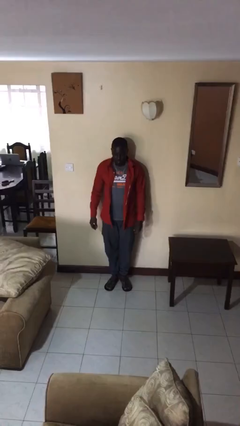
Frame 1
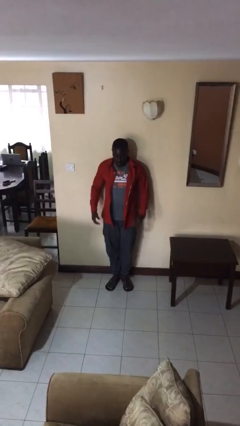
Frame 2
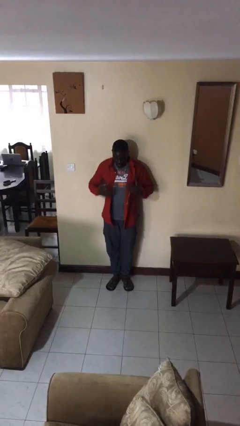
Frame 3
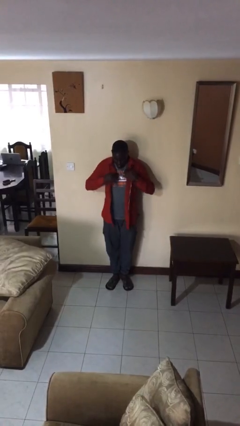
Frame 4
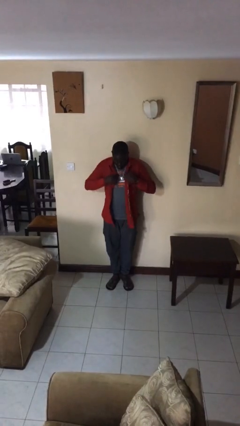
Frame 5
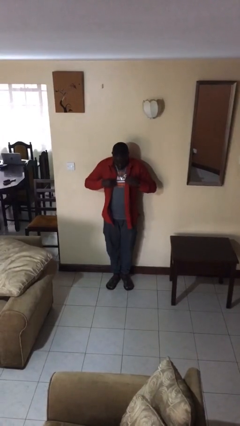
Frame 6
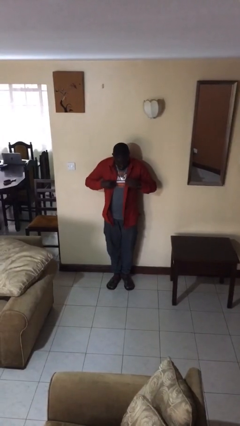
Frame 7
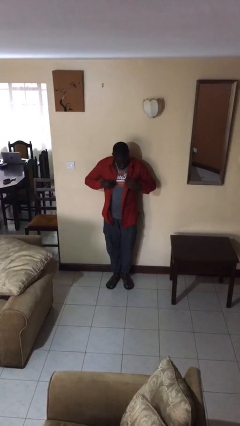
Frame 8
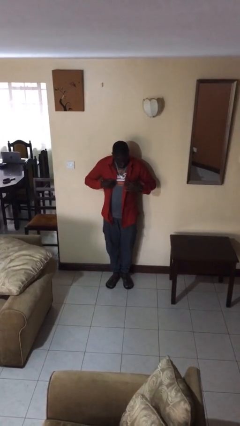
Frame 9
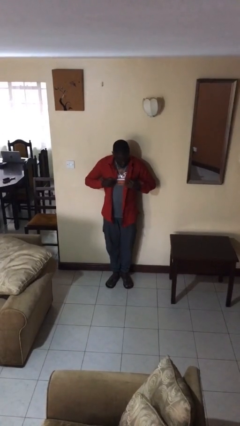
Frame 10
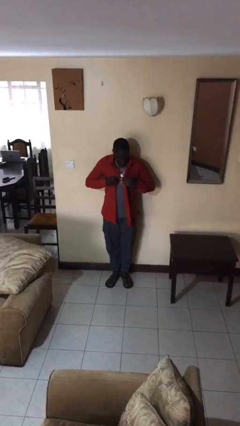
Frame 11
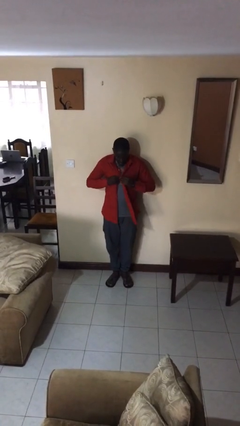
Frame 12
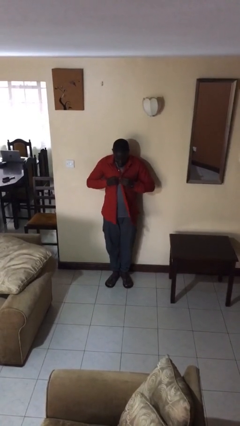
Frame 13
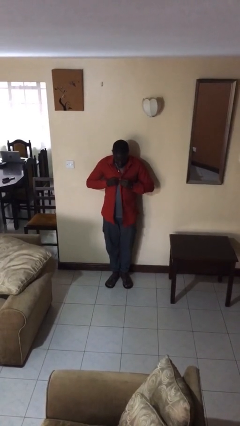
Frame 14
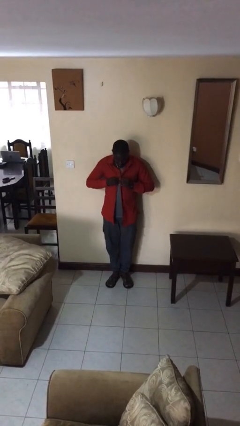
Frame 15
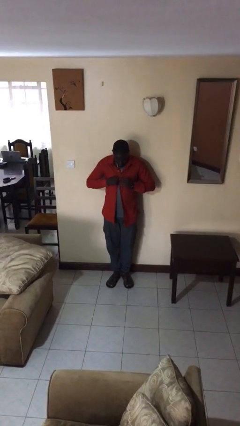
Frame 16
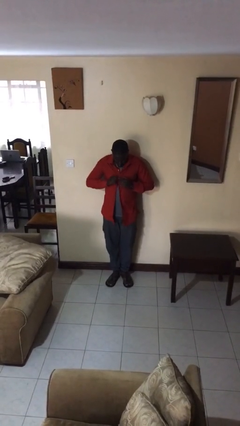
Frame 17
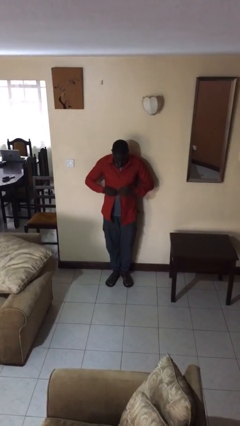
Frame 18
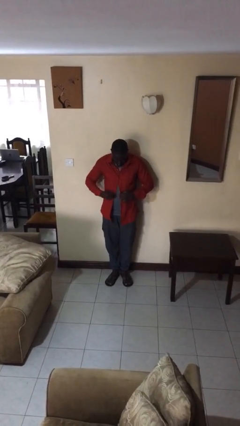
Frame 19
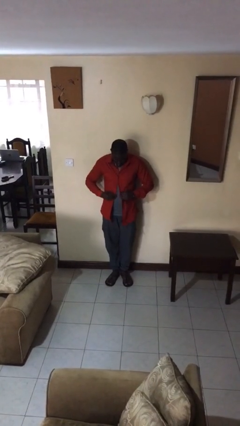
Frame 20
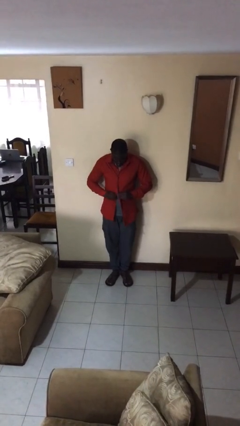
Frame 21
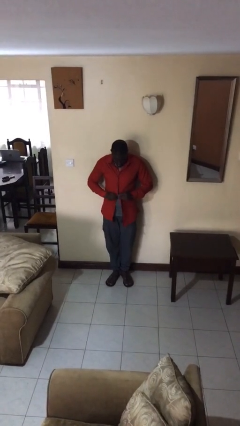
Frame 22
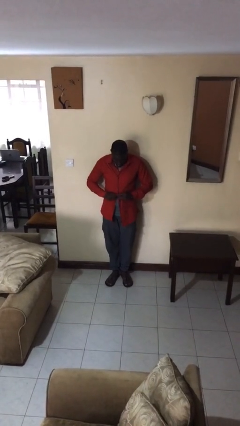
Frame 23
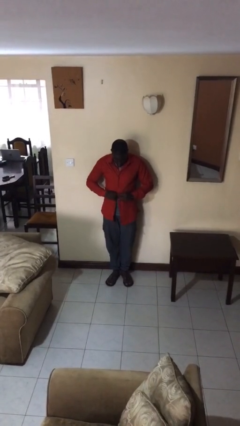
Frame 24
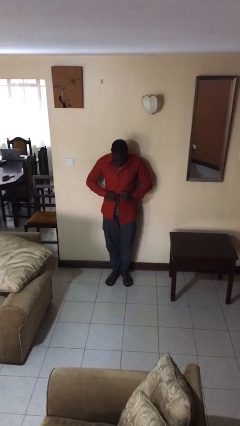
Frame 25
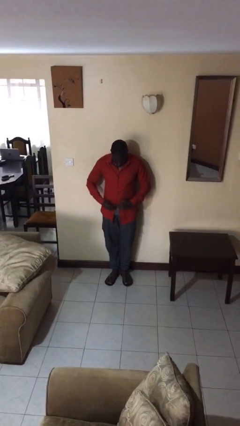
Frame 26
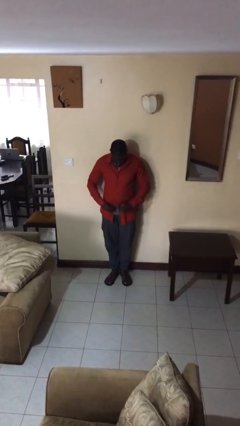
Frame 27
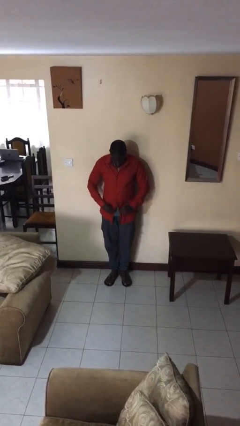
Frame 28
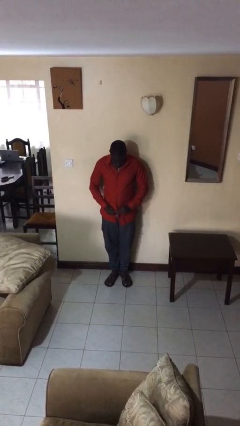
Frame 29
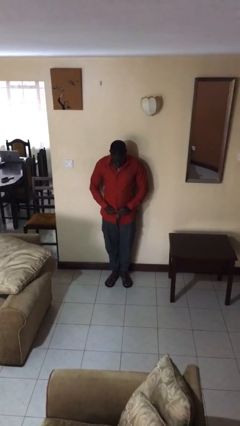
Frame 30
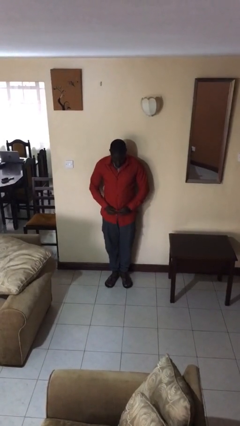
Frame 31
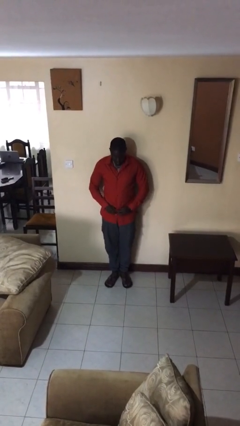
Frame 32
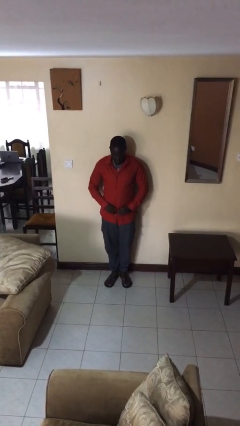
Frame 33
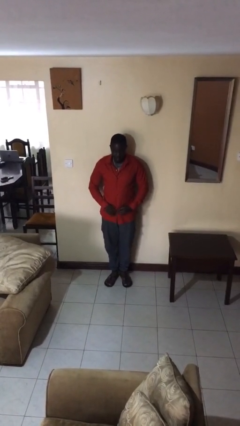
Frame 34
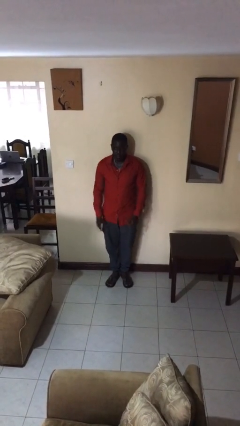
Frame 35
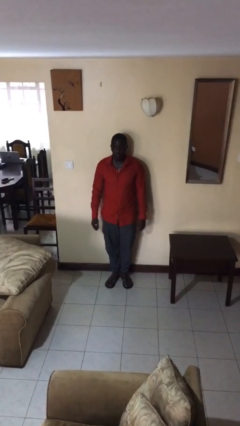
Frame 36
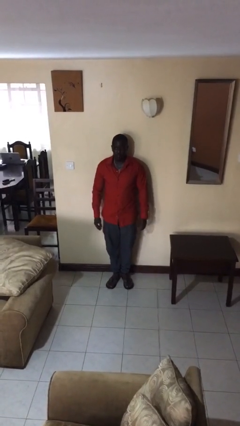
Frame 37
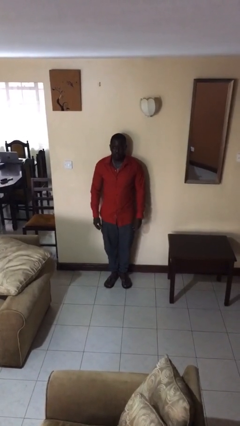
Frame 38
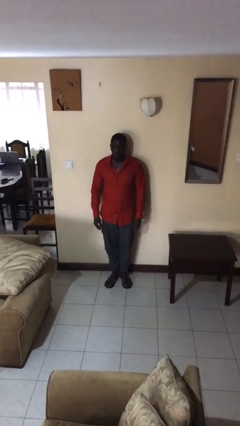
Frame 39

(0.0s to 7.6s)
person buttons shirt

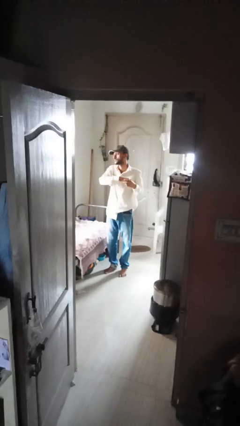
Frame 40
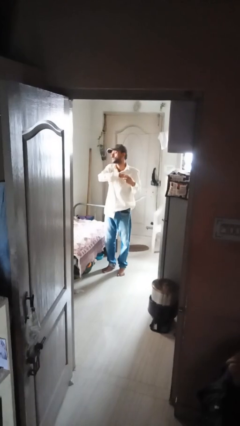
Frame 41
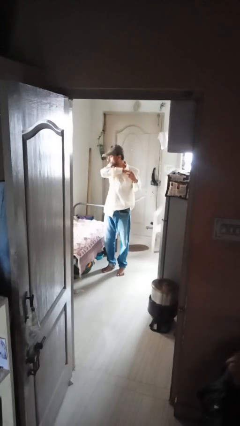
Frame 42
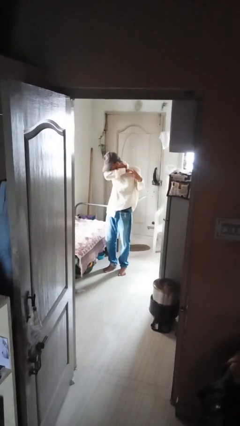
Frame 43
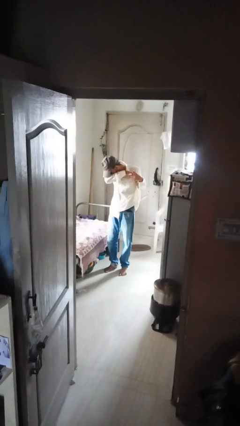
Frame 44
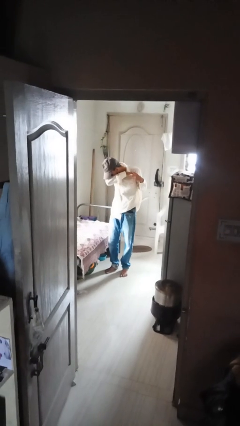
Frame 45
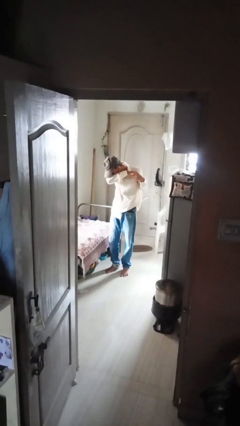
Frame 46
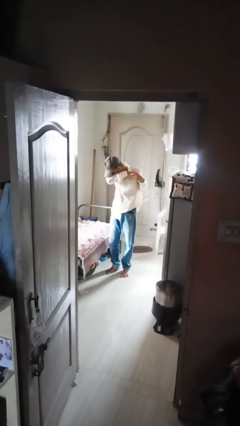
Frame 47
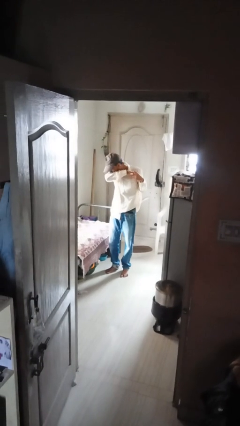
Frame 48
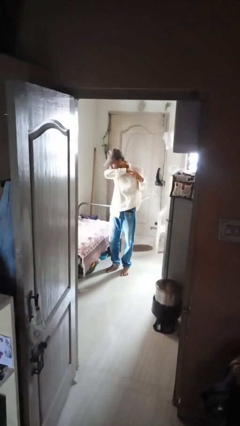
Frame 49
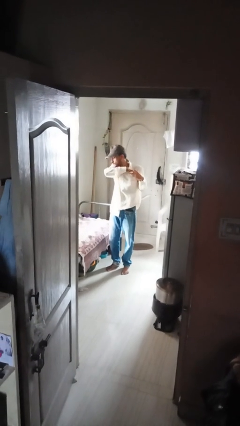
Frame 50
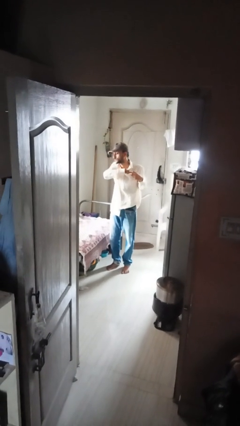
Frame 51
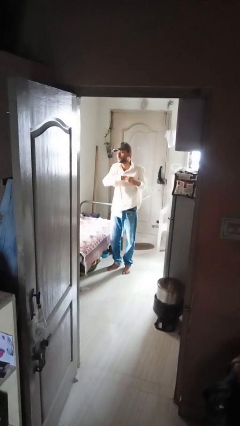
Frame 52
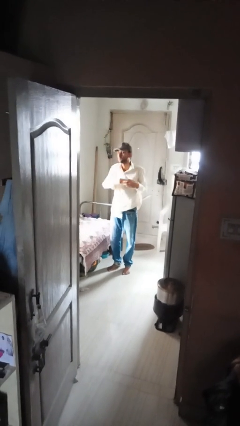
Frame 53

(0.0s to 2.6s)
person sneezes into arm

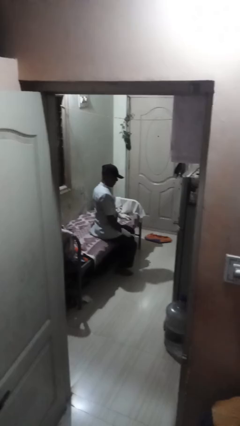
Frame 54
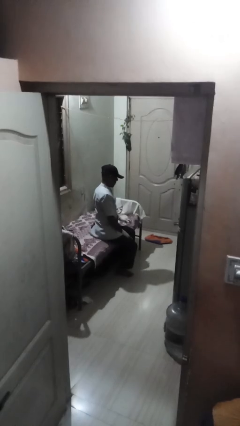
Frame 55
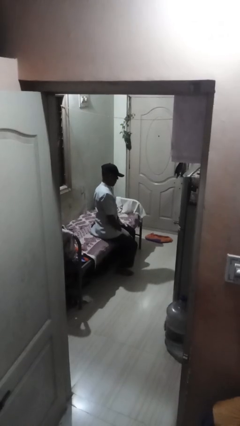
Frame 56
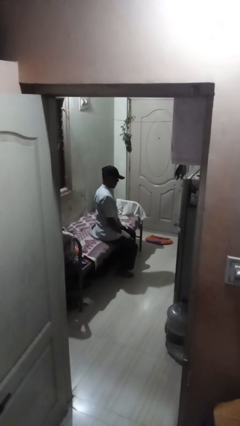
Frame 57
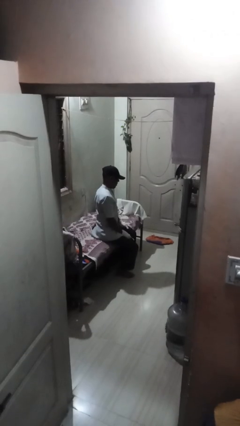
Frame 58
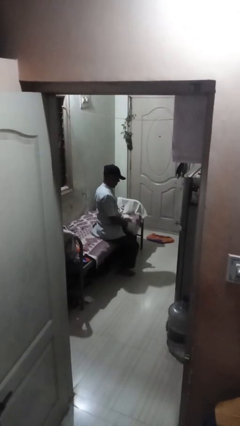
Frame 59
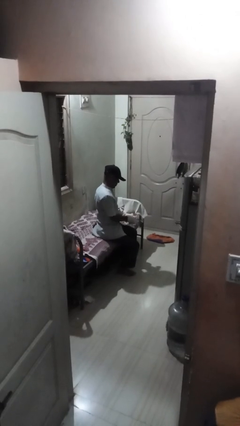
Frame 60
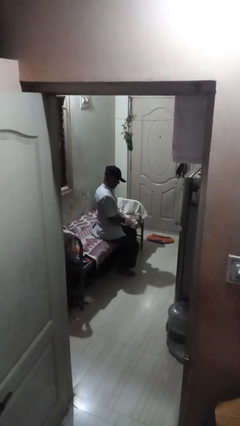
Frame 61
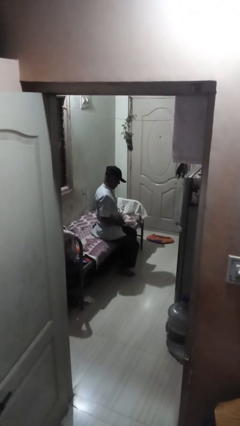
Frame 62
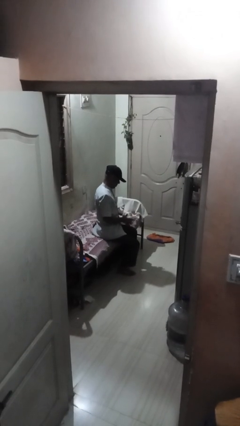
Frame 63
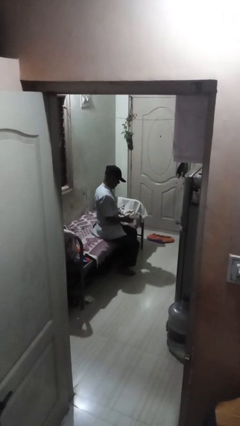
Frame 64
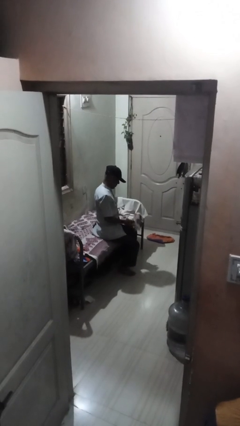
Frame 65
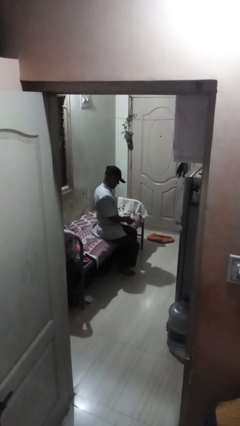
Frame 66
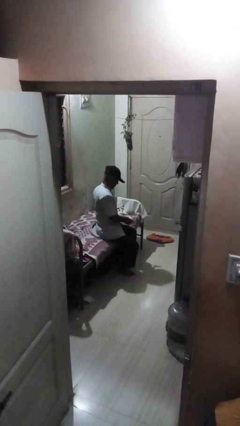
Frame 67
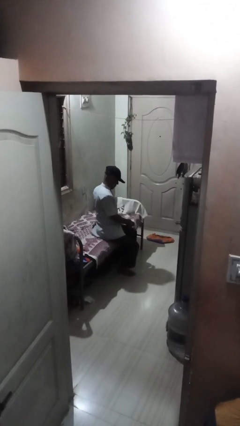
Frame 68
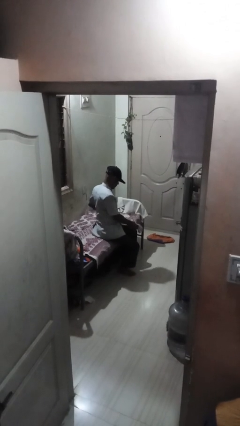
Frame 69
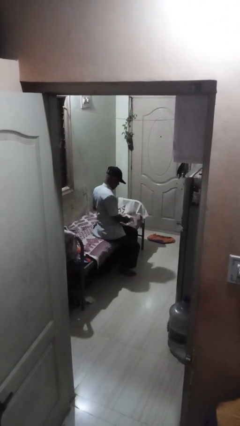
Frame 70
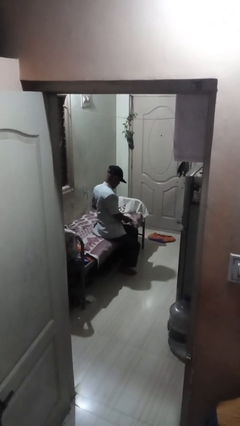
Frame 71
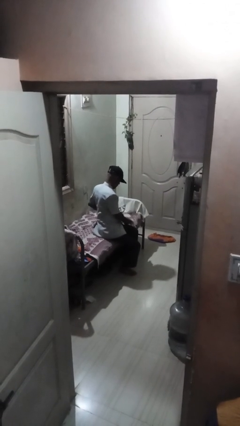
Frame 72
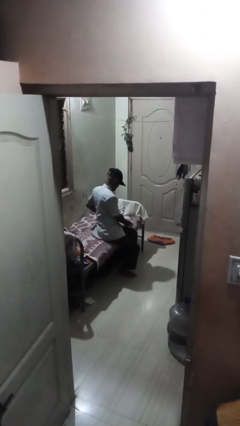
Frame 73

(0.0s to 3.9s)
person takes off gloves

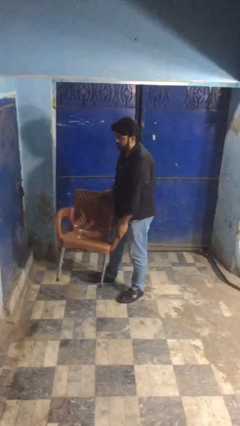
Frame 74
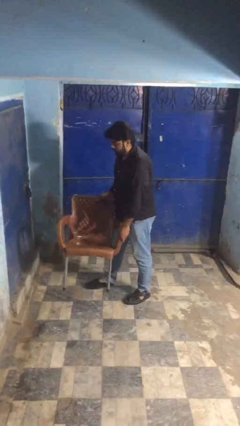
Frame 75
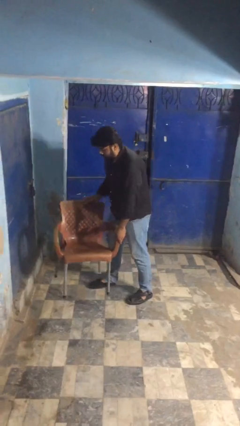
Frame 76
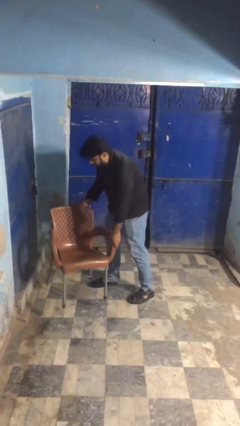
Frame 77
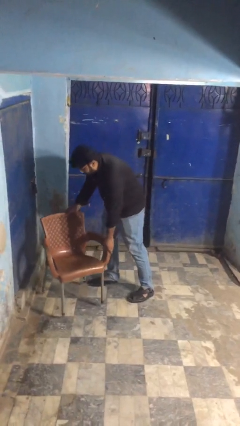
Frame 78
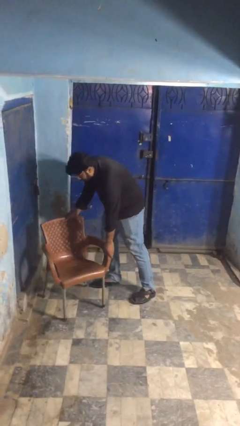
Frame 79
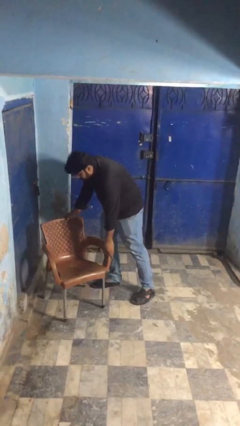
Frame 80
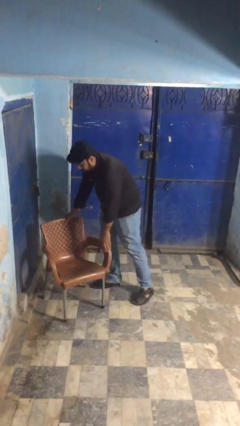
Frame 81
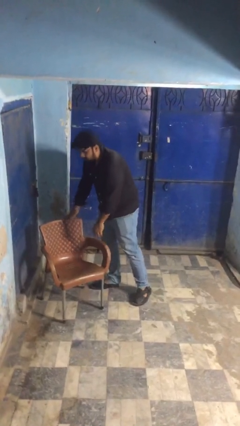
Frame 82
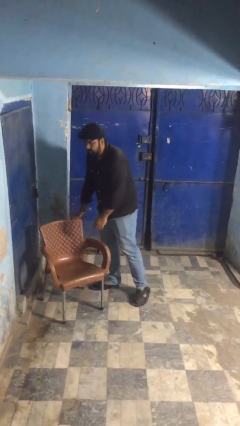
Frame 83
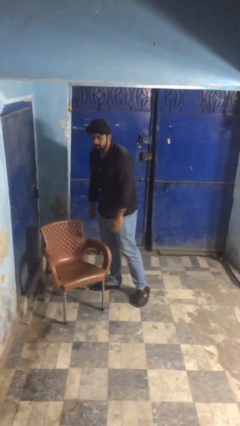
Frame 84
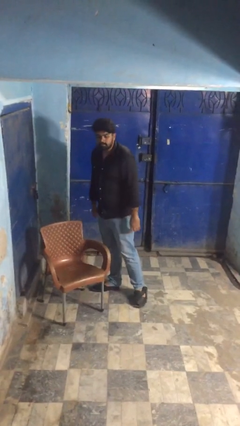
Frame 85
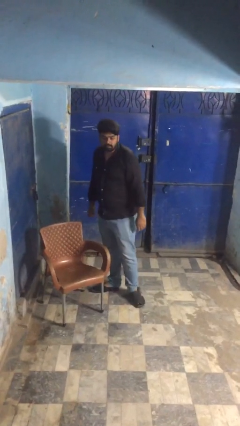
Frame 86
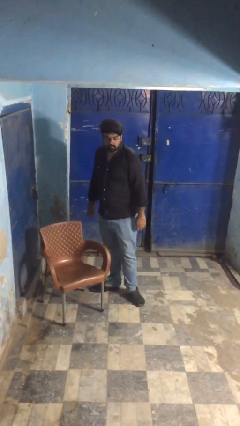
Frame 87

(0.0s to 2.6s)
person puts down object on floor

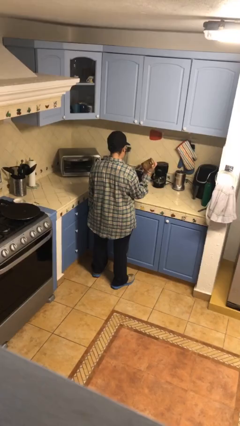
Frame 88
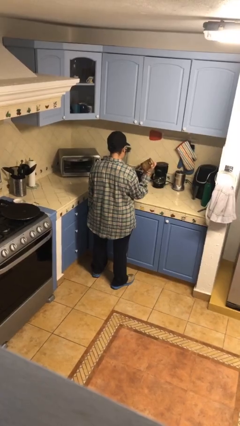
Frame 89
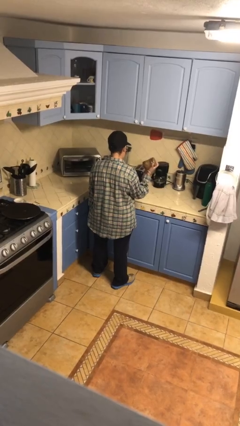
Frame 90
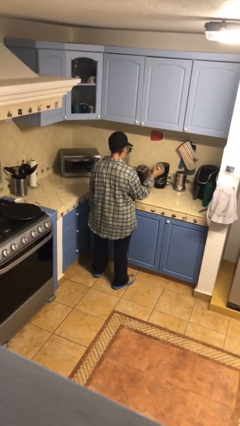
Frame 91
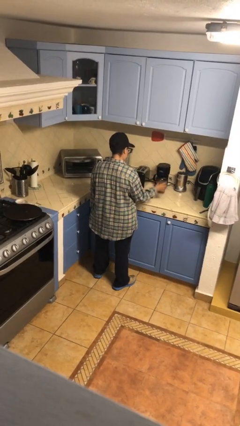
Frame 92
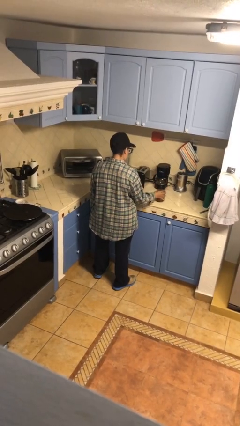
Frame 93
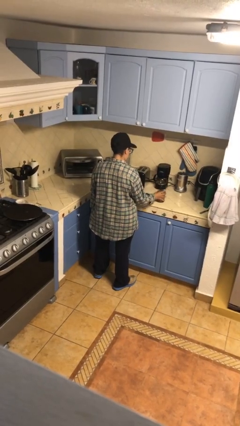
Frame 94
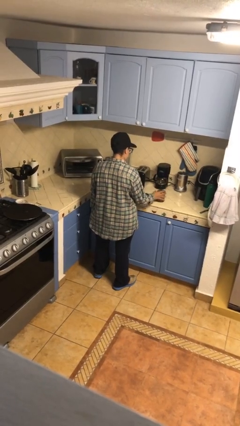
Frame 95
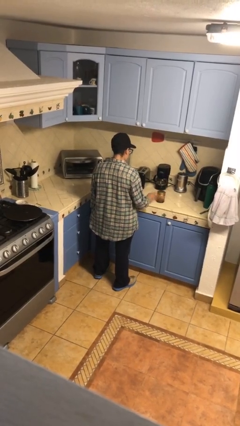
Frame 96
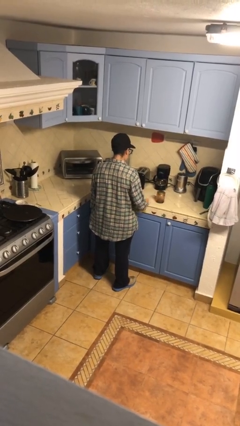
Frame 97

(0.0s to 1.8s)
person puts down object on countertop
